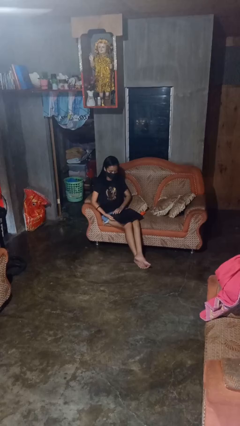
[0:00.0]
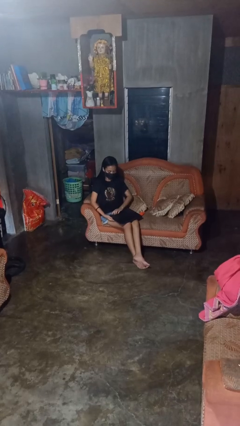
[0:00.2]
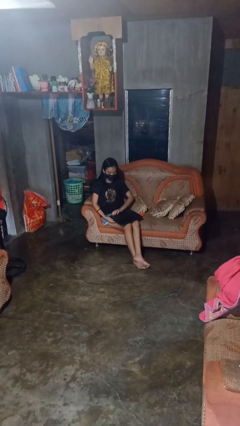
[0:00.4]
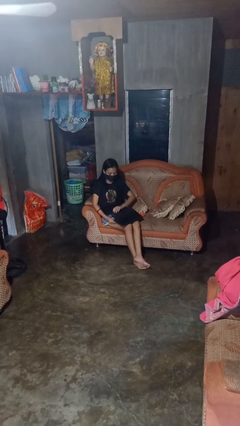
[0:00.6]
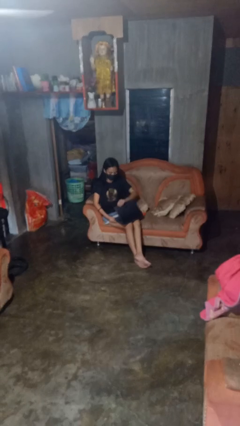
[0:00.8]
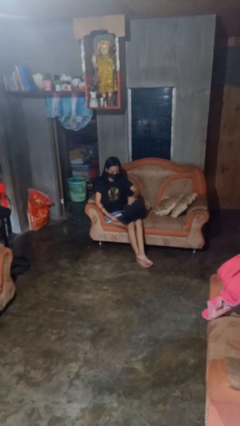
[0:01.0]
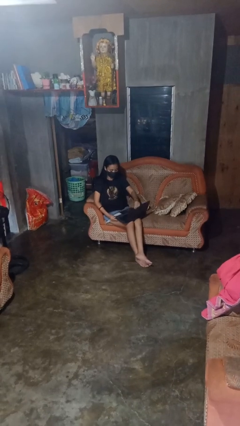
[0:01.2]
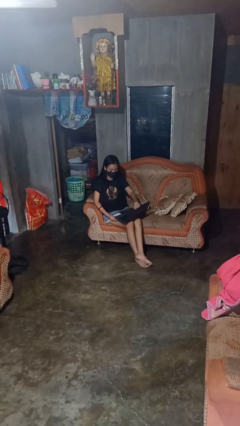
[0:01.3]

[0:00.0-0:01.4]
person opens laptop

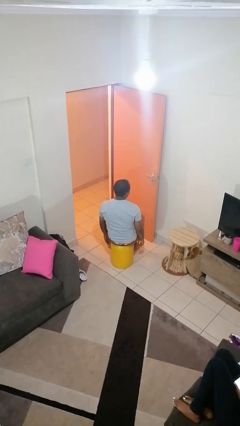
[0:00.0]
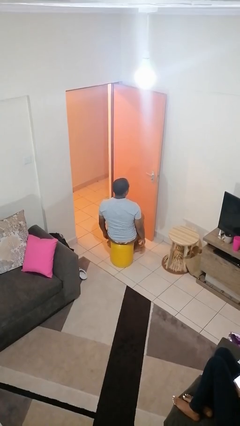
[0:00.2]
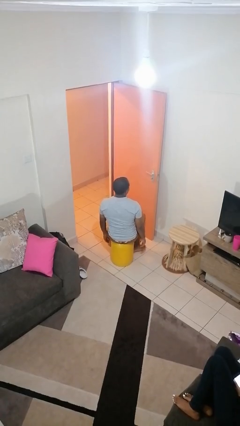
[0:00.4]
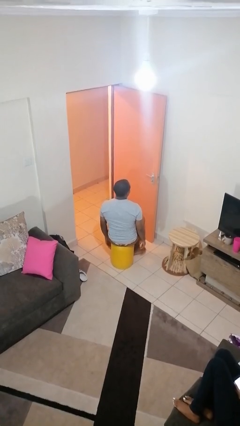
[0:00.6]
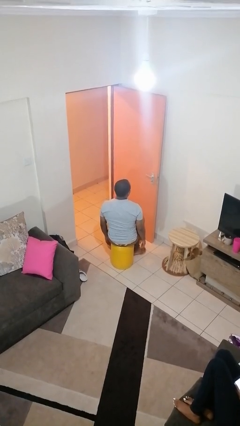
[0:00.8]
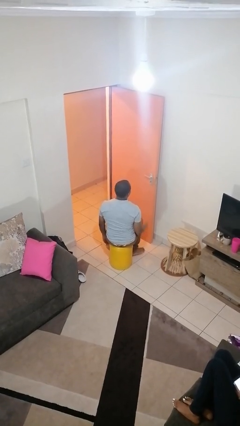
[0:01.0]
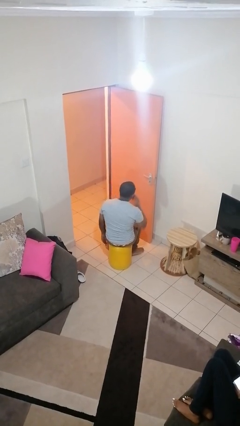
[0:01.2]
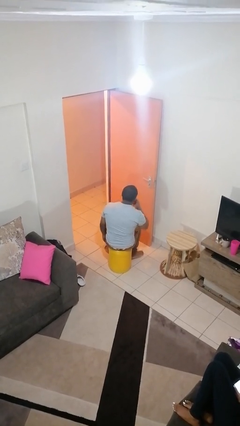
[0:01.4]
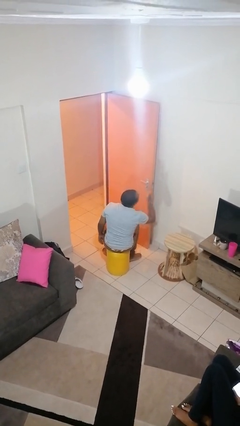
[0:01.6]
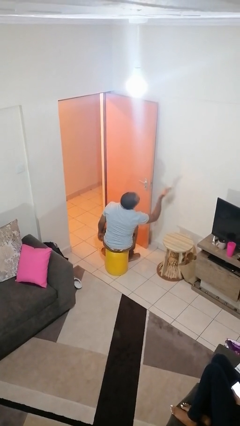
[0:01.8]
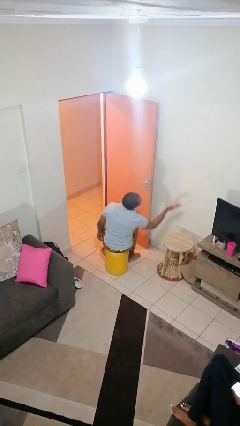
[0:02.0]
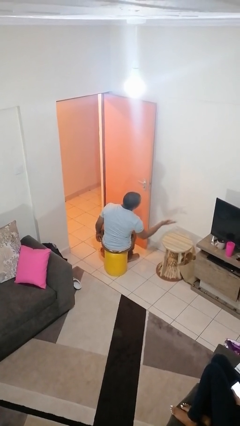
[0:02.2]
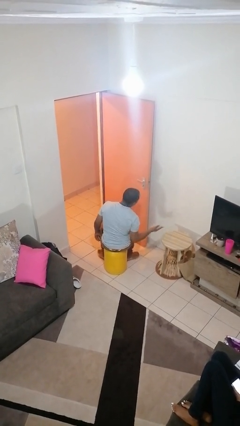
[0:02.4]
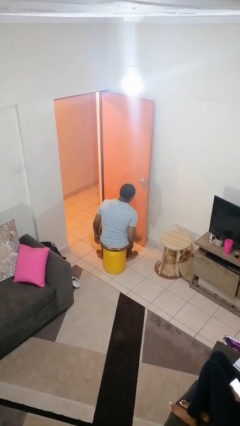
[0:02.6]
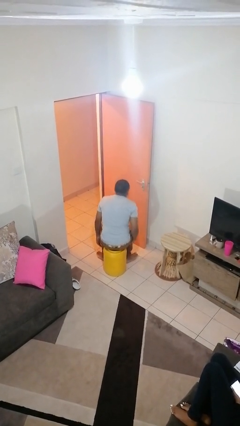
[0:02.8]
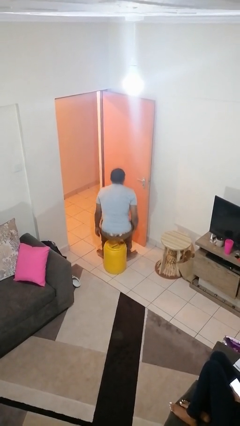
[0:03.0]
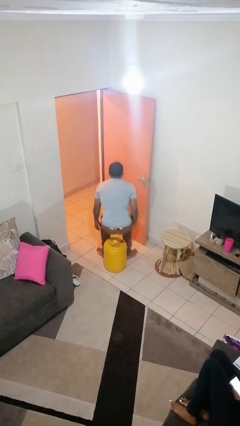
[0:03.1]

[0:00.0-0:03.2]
person gestures blow kiss

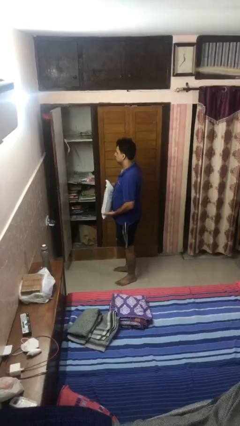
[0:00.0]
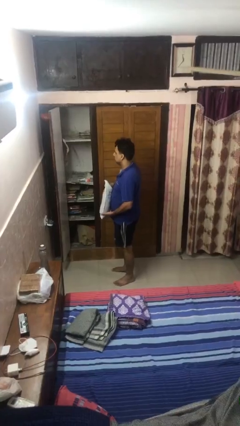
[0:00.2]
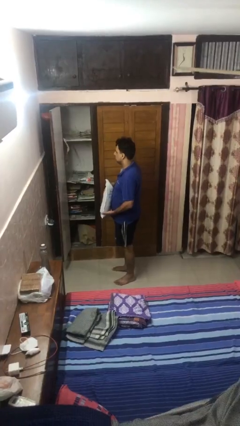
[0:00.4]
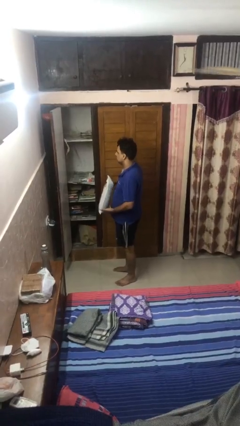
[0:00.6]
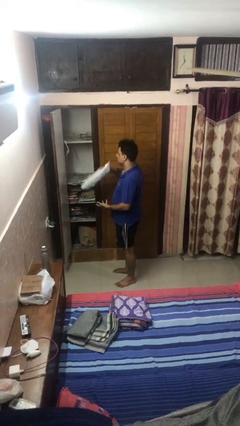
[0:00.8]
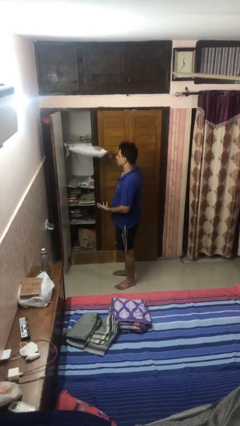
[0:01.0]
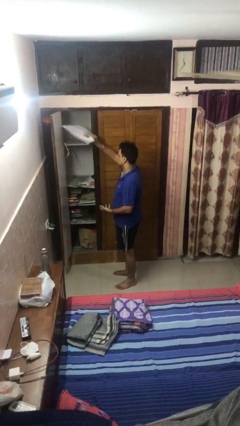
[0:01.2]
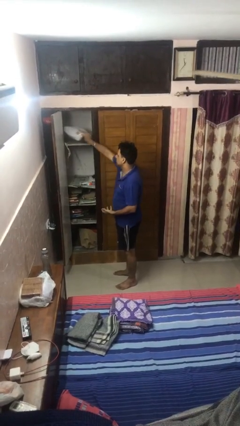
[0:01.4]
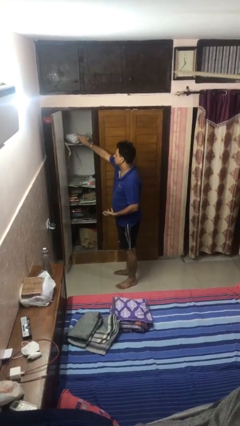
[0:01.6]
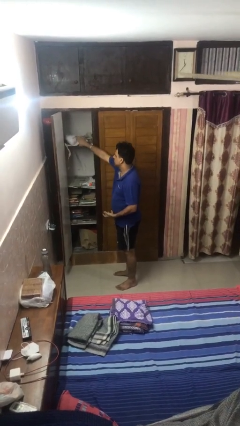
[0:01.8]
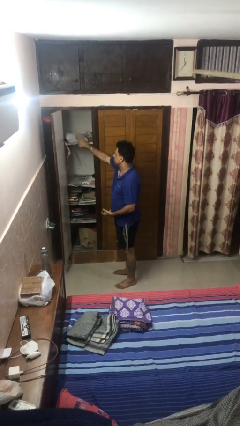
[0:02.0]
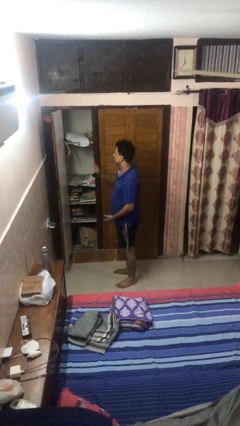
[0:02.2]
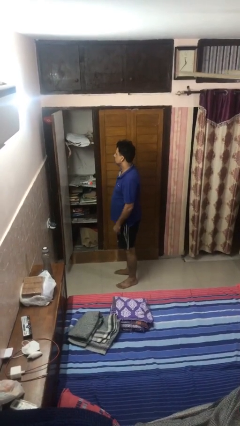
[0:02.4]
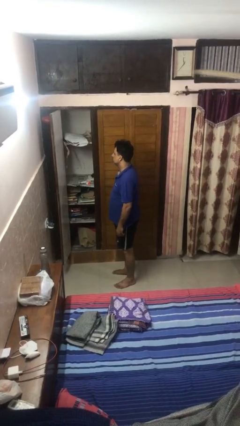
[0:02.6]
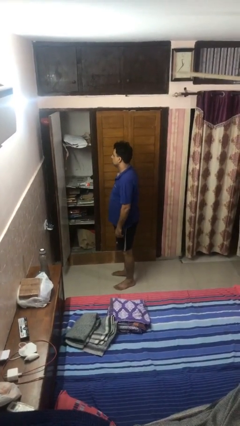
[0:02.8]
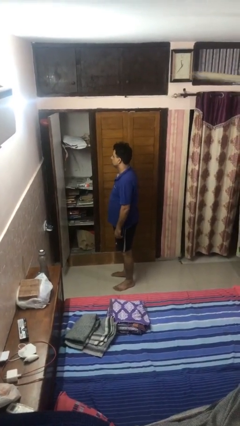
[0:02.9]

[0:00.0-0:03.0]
person puts down object on shelf

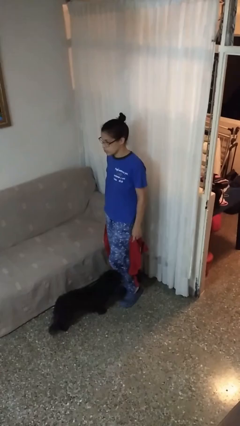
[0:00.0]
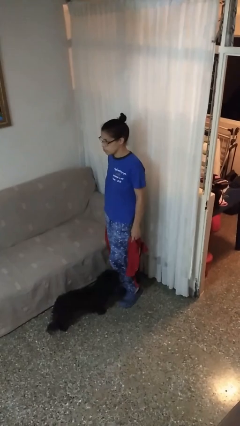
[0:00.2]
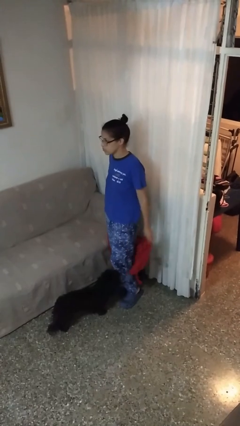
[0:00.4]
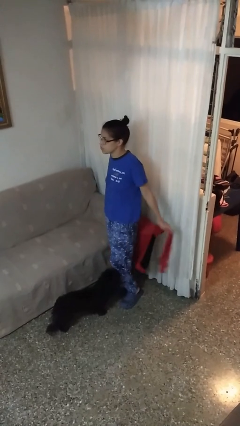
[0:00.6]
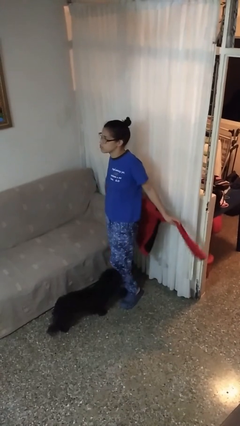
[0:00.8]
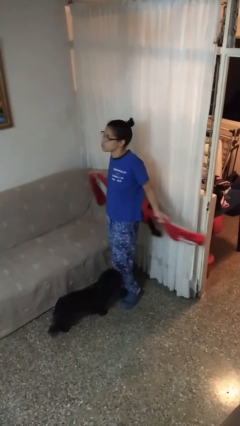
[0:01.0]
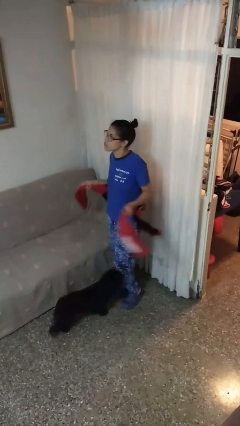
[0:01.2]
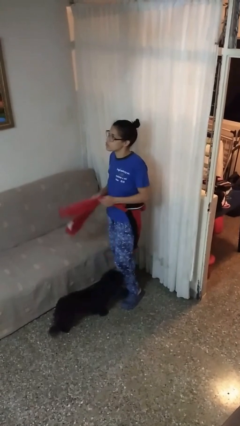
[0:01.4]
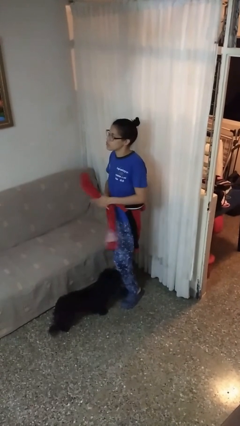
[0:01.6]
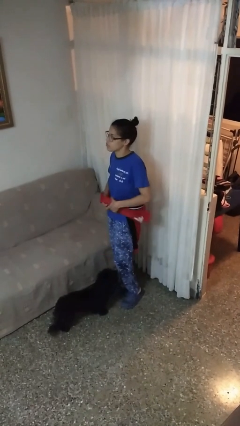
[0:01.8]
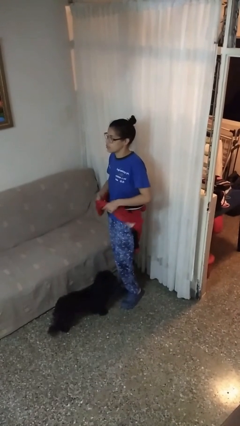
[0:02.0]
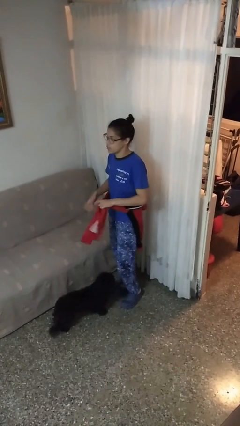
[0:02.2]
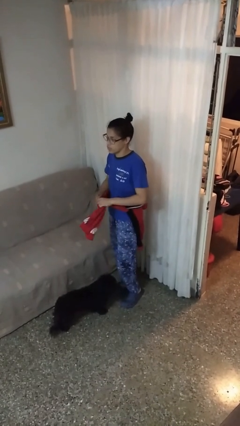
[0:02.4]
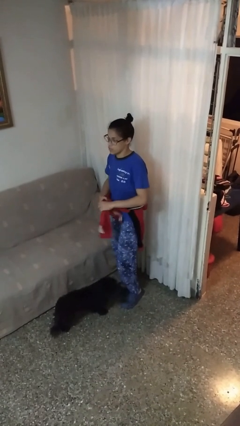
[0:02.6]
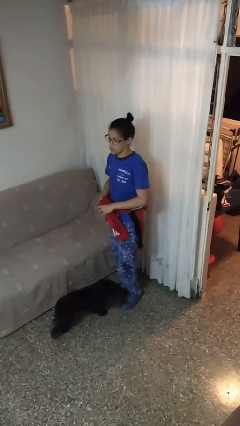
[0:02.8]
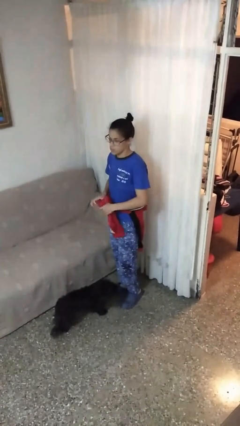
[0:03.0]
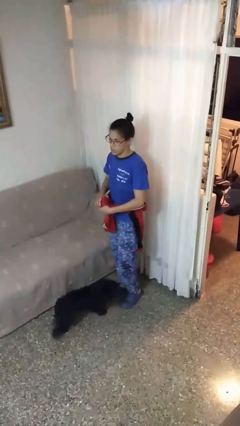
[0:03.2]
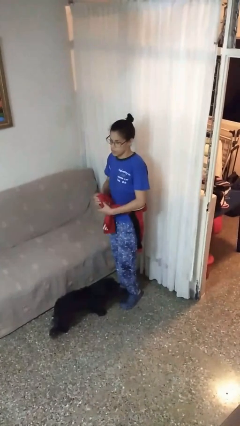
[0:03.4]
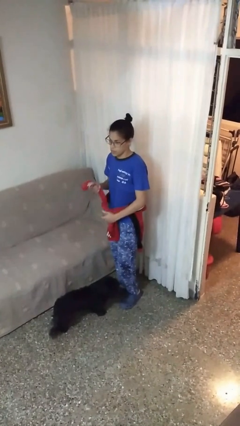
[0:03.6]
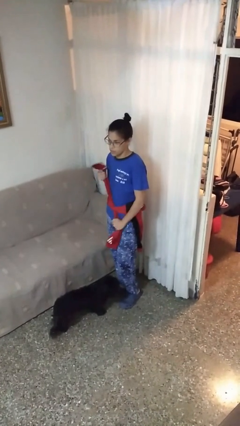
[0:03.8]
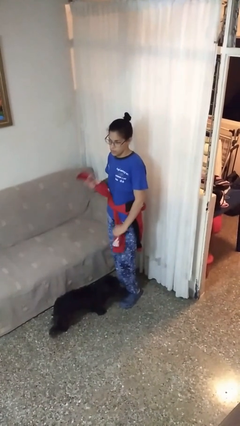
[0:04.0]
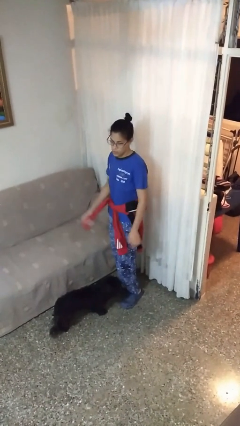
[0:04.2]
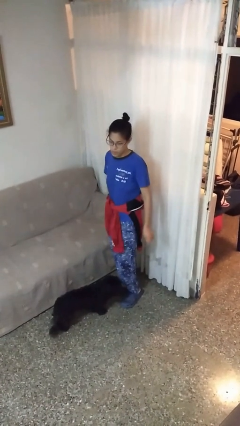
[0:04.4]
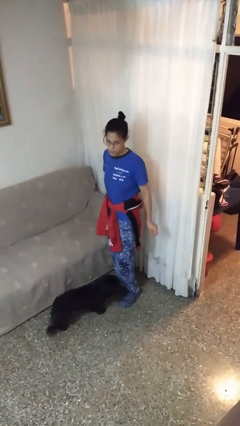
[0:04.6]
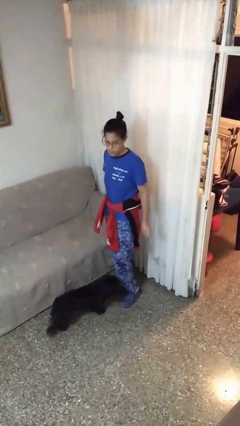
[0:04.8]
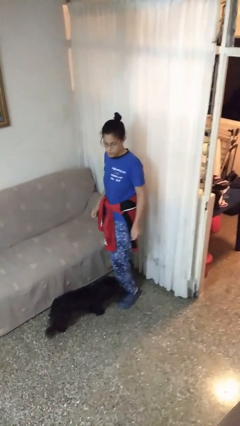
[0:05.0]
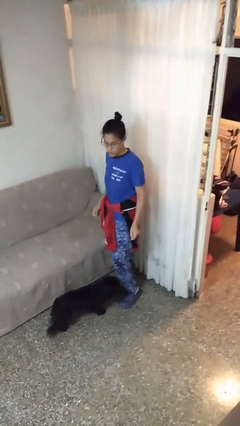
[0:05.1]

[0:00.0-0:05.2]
person ties jacket around waist

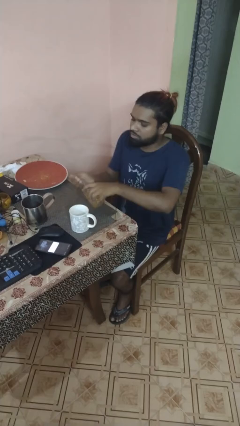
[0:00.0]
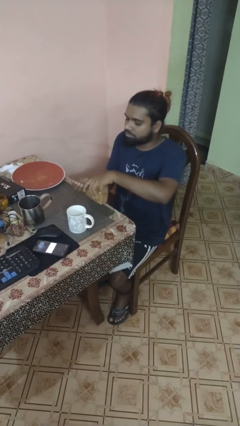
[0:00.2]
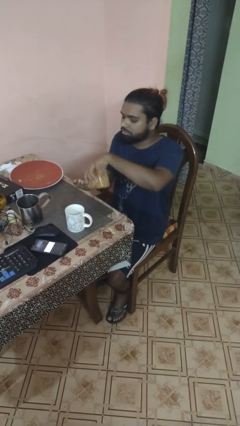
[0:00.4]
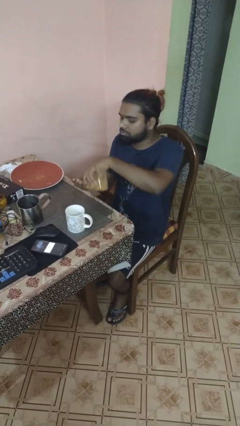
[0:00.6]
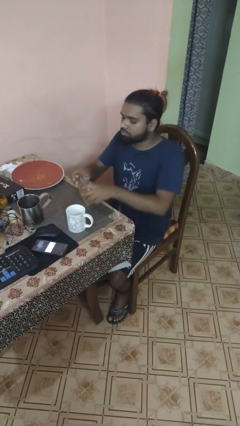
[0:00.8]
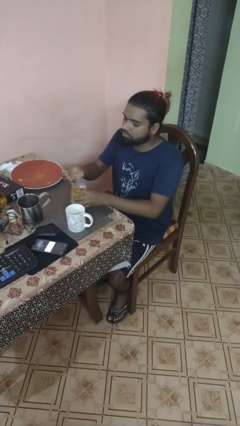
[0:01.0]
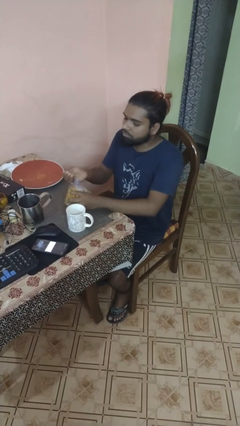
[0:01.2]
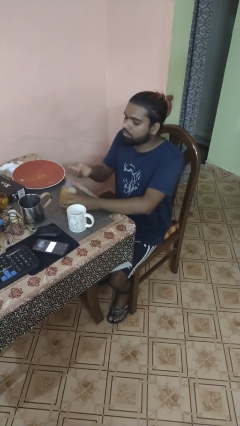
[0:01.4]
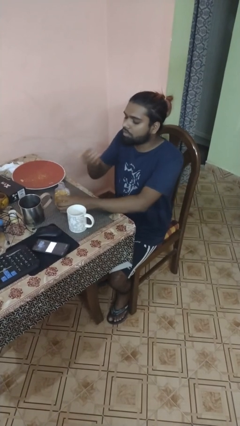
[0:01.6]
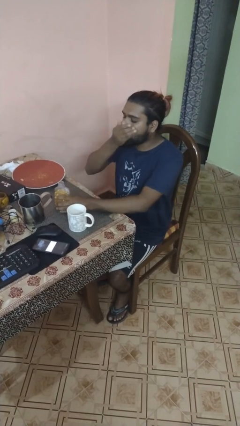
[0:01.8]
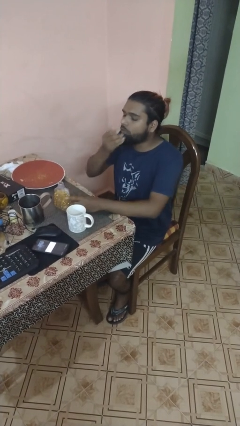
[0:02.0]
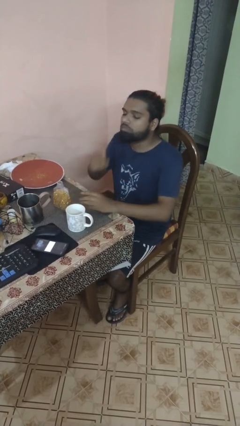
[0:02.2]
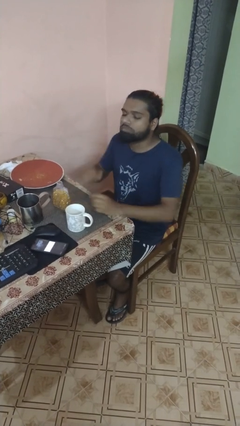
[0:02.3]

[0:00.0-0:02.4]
person takes medicine pills

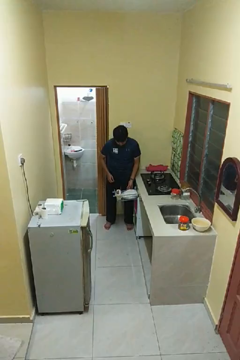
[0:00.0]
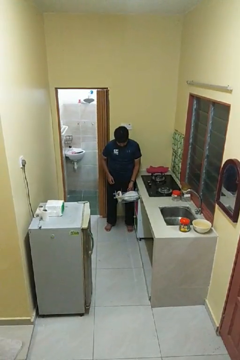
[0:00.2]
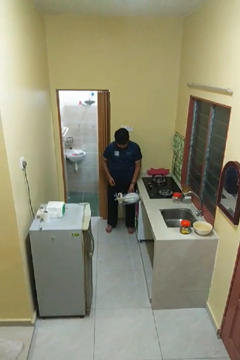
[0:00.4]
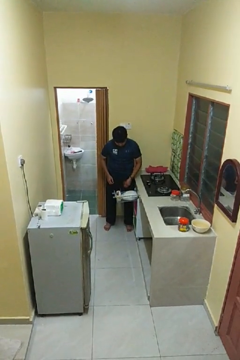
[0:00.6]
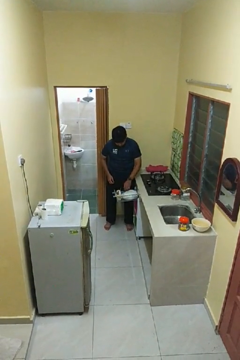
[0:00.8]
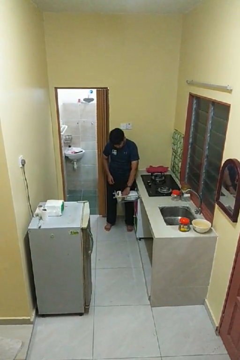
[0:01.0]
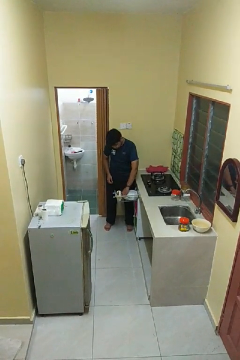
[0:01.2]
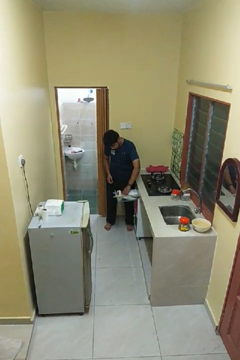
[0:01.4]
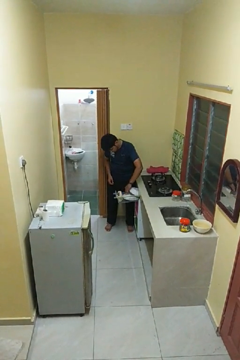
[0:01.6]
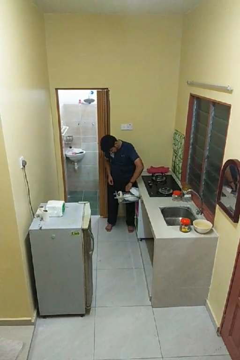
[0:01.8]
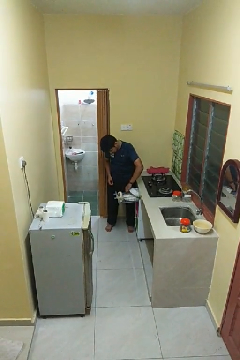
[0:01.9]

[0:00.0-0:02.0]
person searches in kitchen drawer

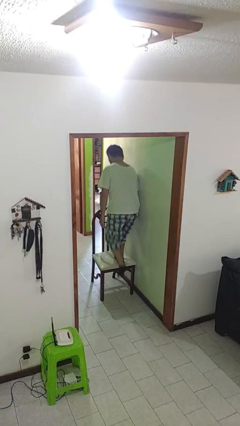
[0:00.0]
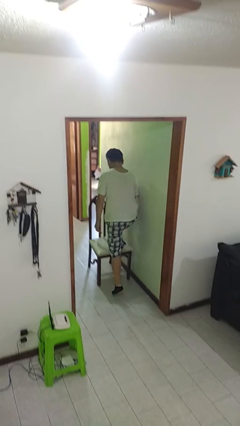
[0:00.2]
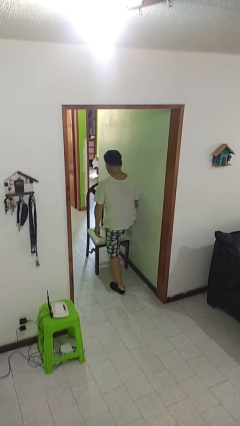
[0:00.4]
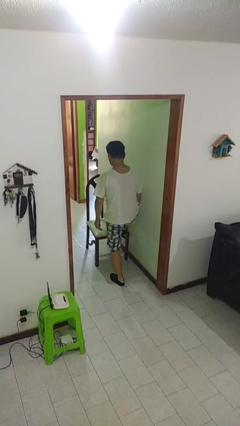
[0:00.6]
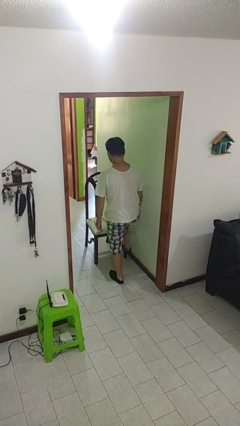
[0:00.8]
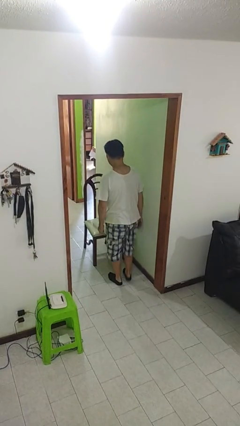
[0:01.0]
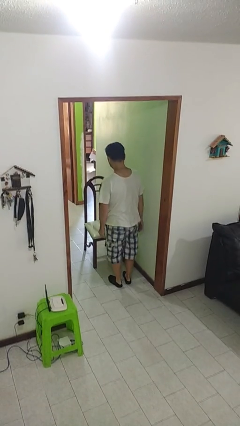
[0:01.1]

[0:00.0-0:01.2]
person climbs off chair
